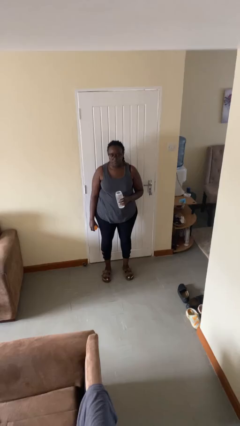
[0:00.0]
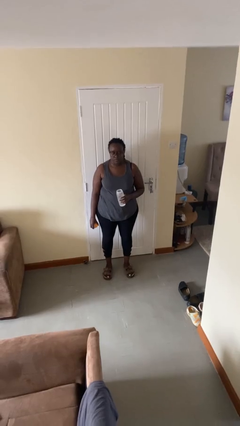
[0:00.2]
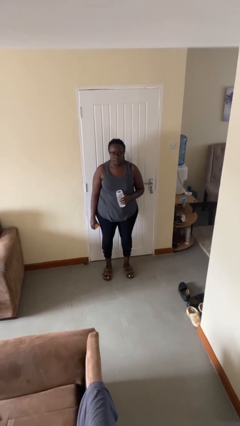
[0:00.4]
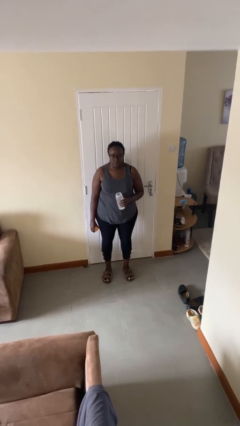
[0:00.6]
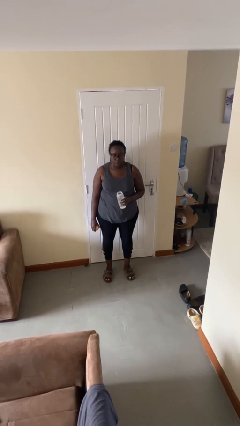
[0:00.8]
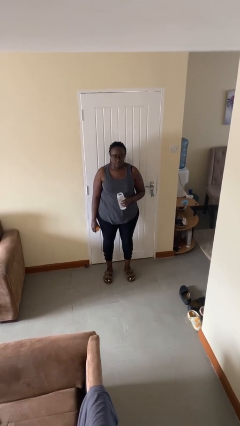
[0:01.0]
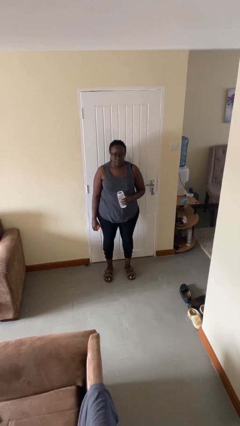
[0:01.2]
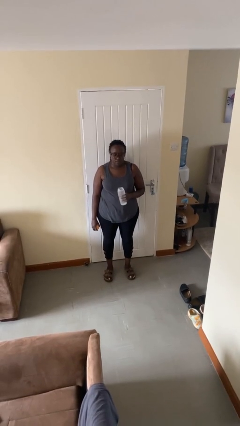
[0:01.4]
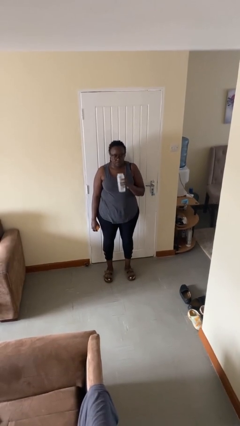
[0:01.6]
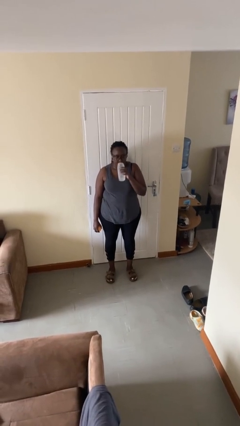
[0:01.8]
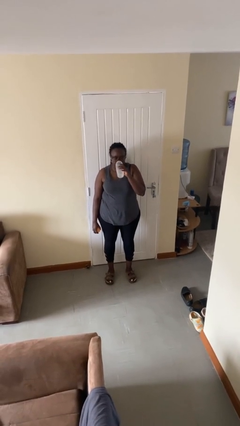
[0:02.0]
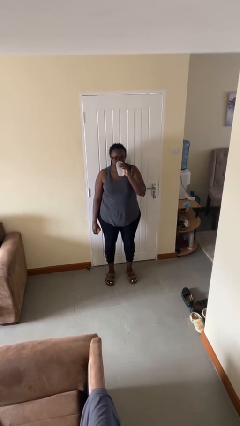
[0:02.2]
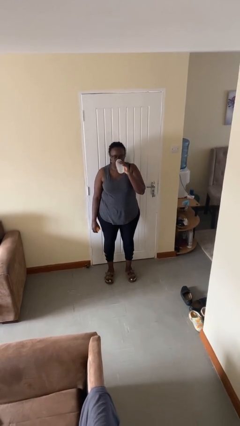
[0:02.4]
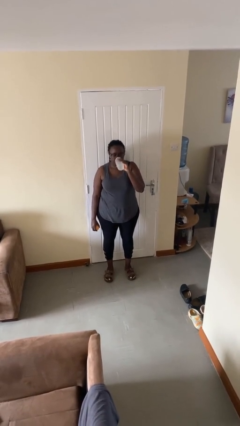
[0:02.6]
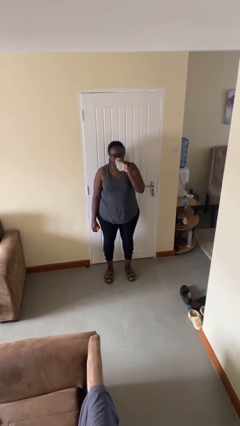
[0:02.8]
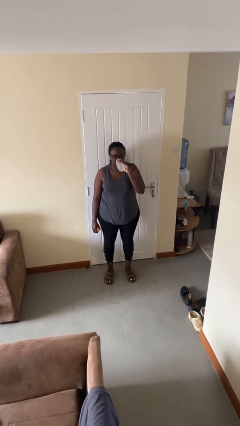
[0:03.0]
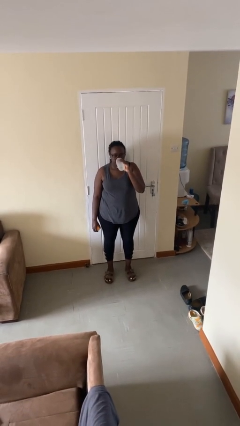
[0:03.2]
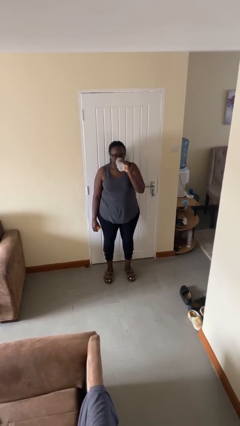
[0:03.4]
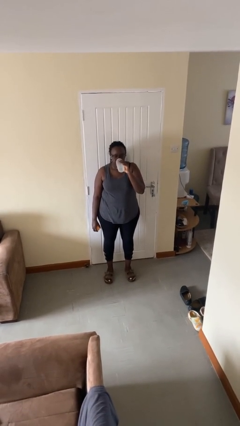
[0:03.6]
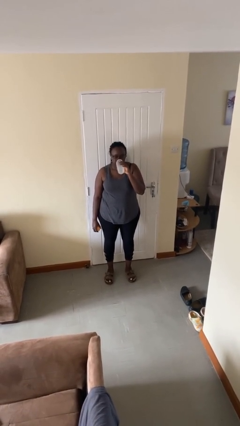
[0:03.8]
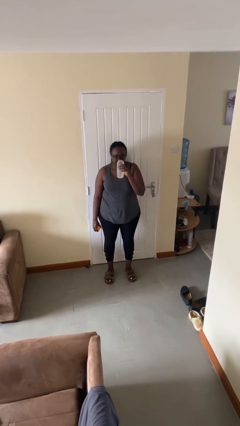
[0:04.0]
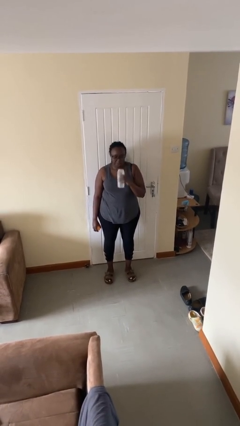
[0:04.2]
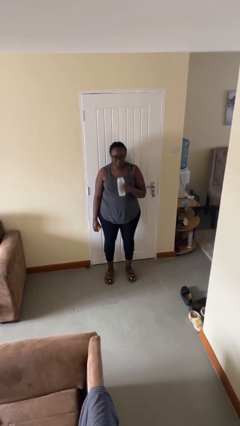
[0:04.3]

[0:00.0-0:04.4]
person drinks from bottle

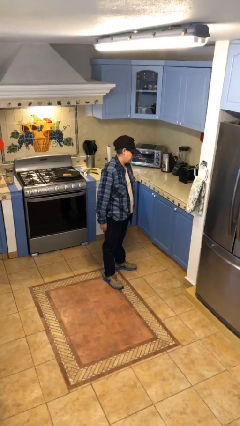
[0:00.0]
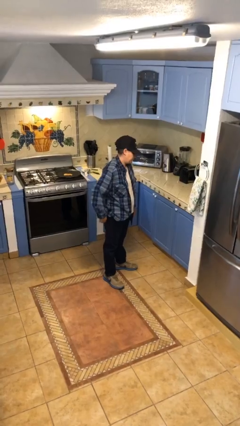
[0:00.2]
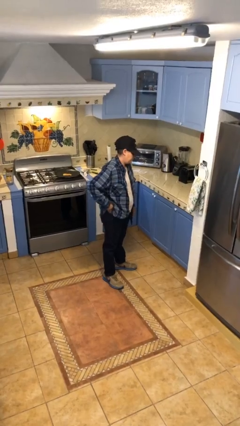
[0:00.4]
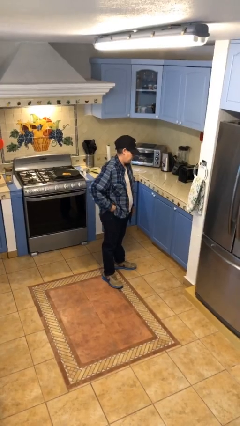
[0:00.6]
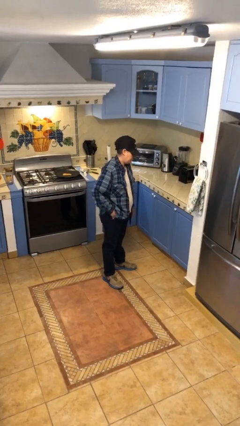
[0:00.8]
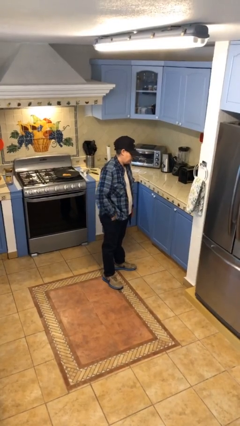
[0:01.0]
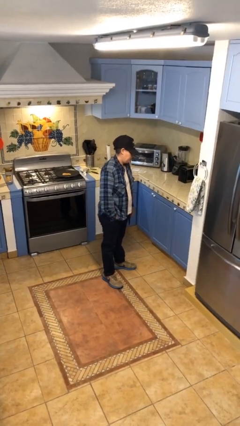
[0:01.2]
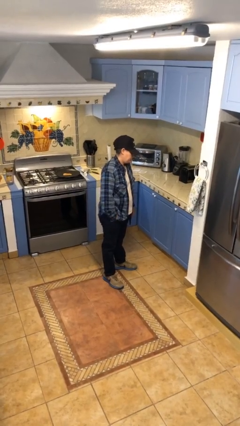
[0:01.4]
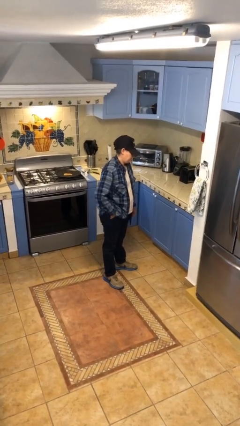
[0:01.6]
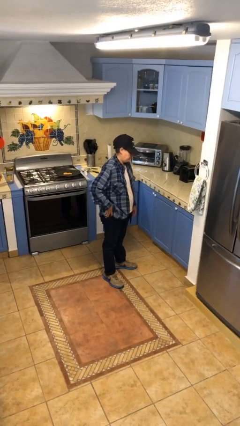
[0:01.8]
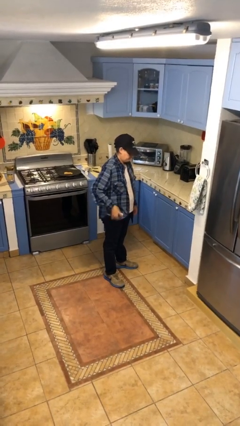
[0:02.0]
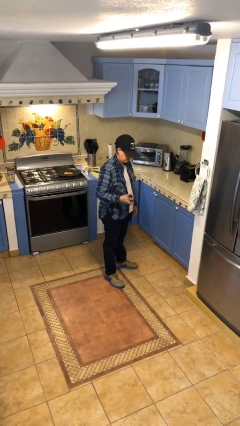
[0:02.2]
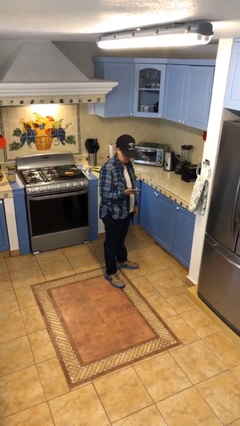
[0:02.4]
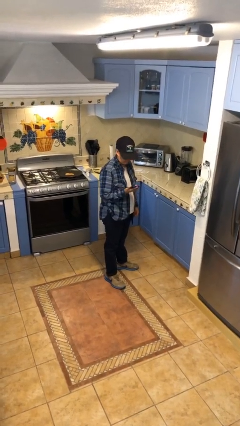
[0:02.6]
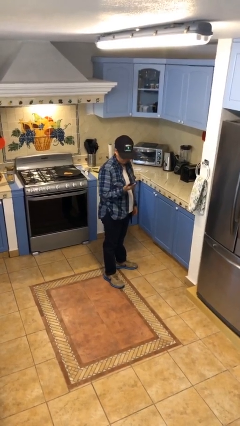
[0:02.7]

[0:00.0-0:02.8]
person takes phone from pocket

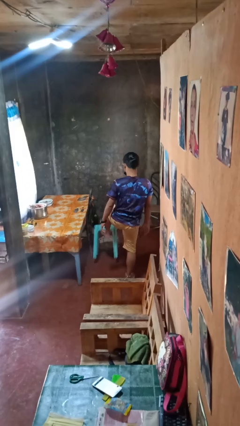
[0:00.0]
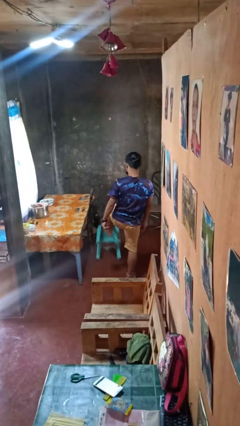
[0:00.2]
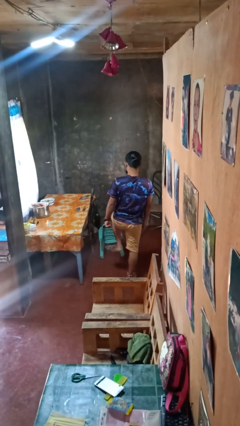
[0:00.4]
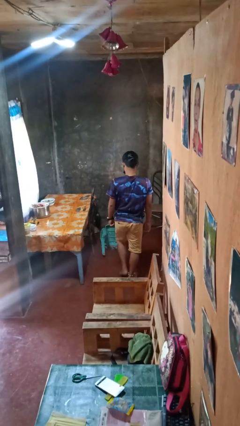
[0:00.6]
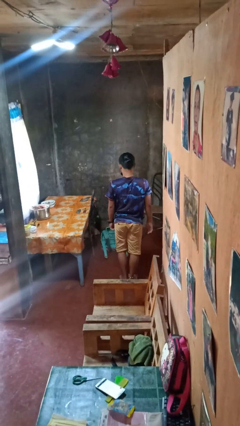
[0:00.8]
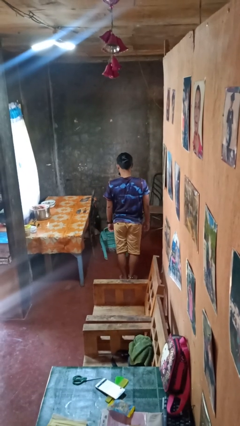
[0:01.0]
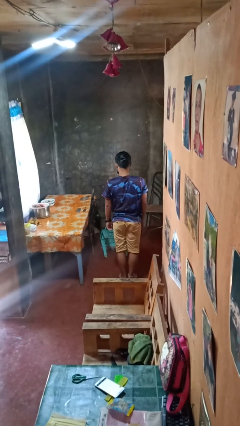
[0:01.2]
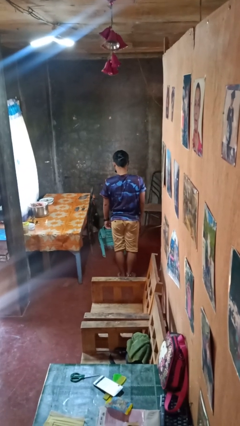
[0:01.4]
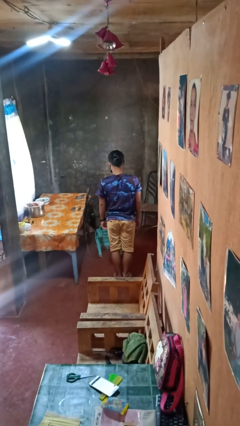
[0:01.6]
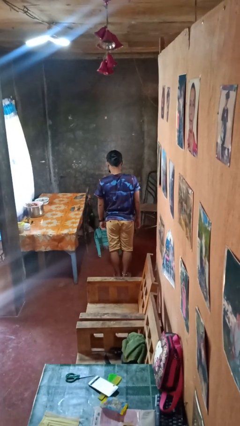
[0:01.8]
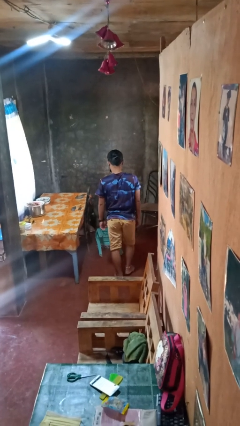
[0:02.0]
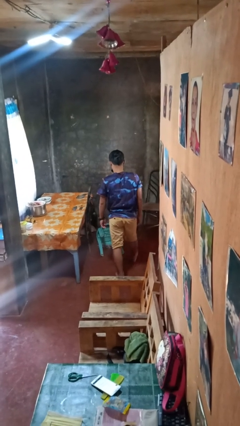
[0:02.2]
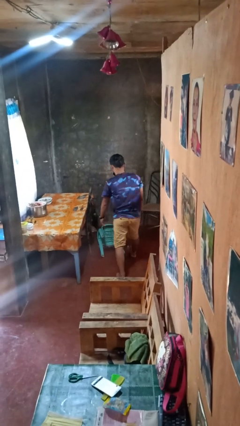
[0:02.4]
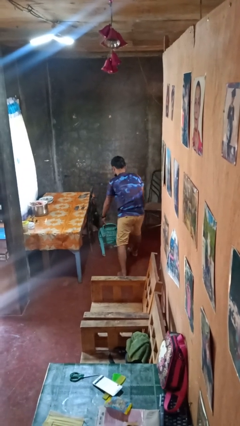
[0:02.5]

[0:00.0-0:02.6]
person knocks over furniture

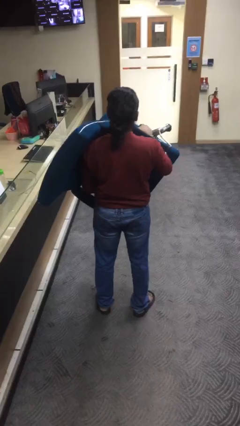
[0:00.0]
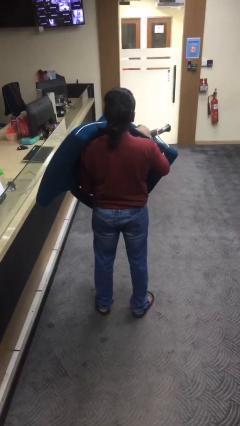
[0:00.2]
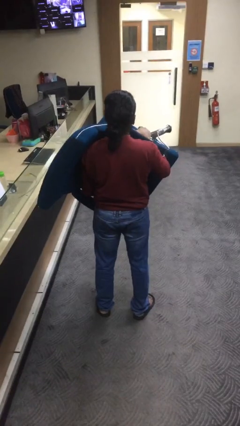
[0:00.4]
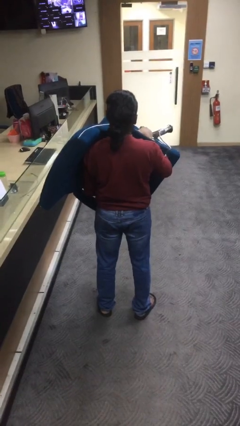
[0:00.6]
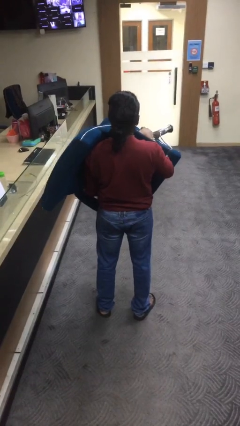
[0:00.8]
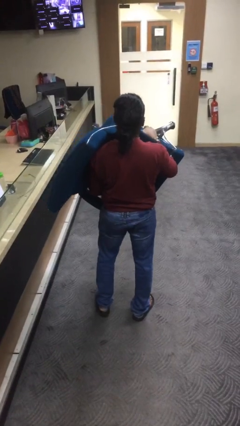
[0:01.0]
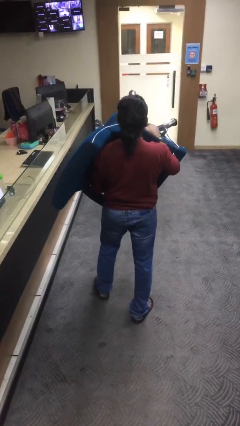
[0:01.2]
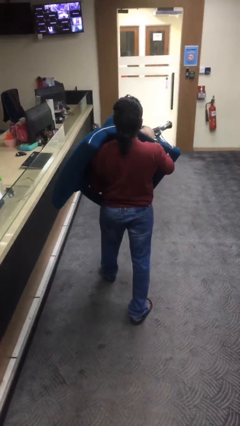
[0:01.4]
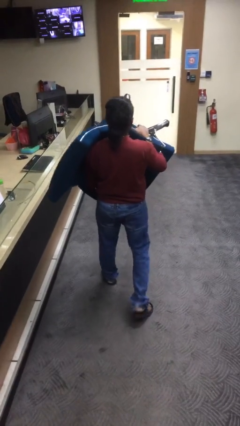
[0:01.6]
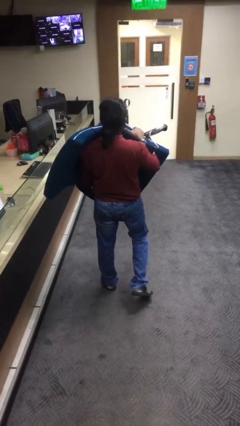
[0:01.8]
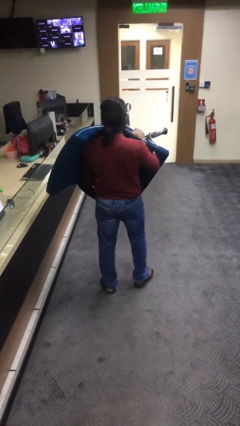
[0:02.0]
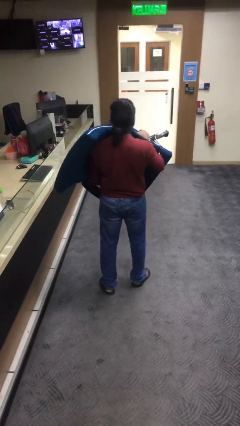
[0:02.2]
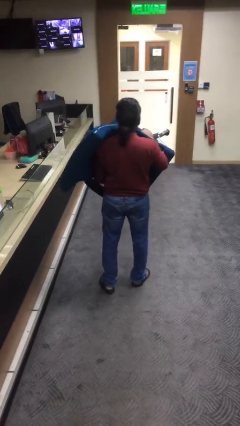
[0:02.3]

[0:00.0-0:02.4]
person carries furniture

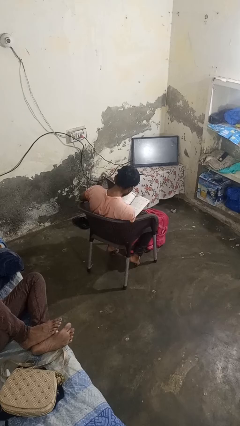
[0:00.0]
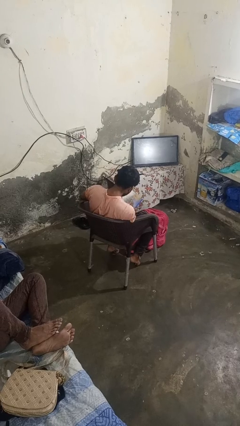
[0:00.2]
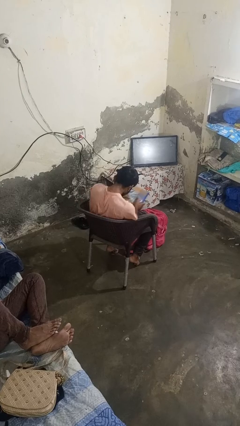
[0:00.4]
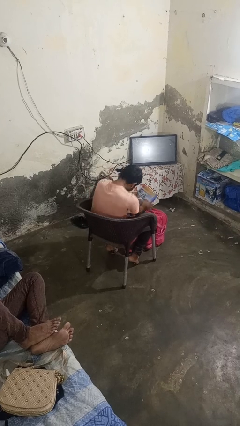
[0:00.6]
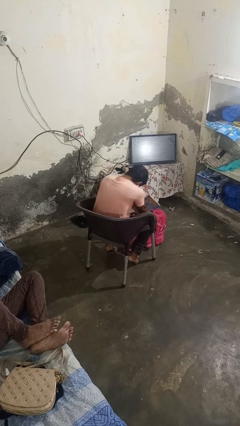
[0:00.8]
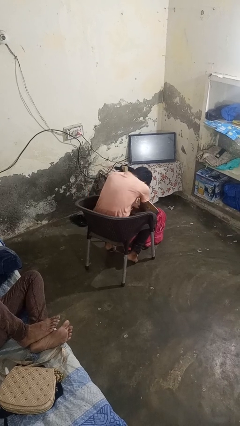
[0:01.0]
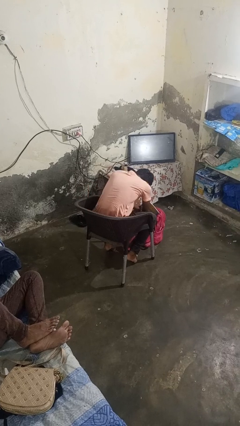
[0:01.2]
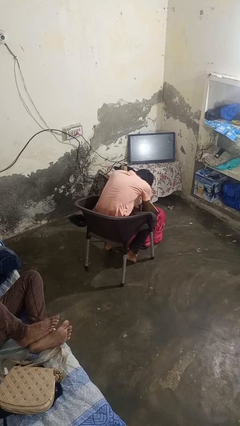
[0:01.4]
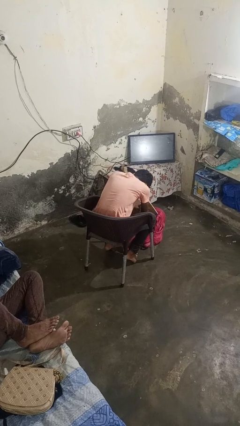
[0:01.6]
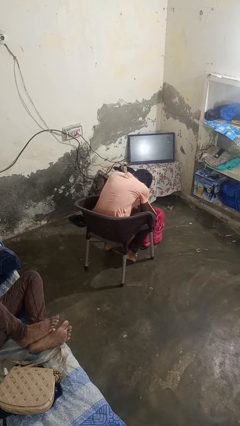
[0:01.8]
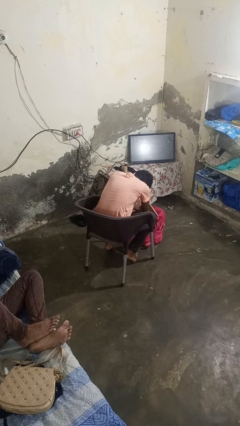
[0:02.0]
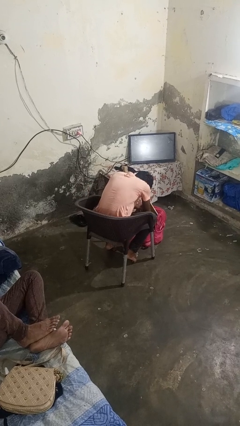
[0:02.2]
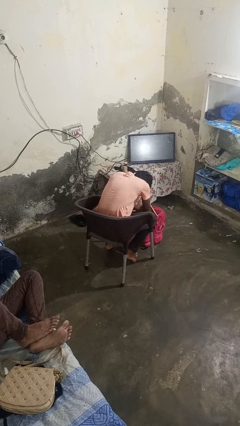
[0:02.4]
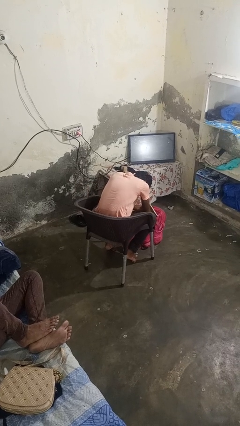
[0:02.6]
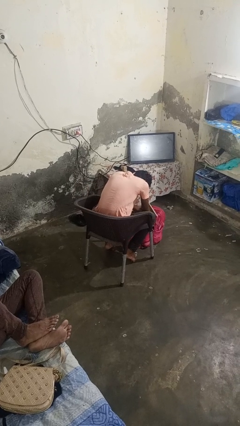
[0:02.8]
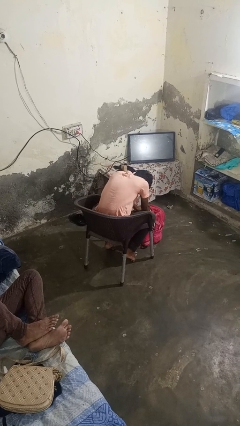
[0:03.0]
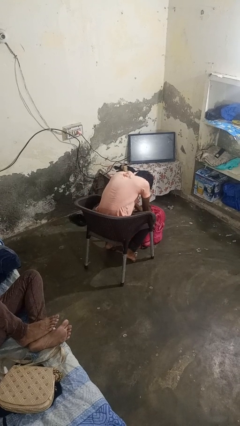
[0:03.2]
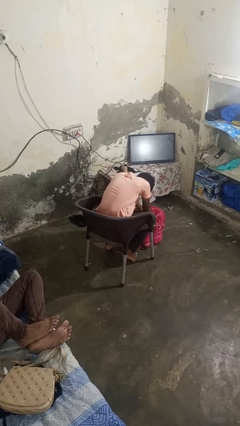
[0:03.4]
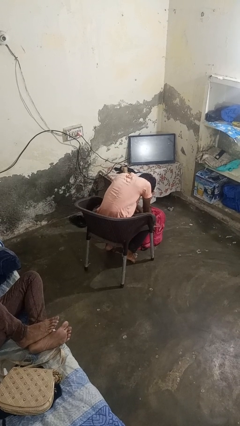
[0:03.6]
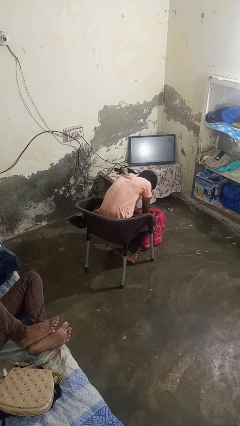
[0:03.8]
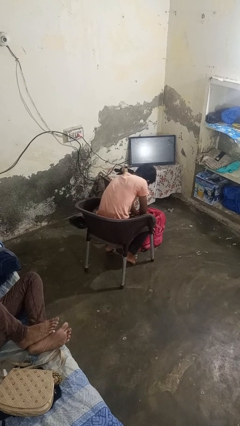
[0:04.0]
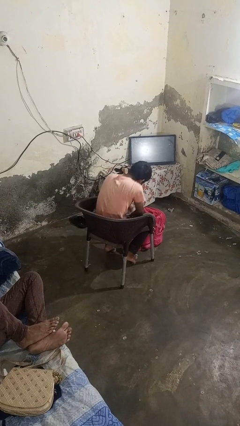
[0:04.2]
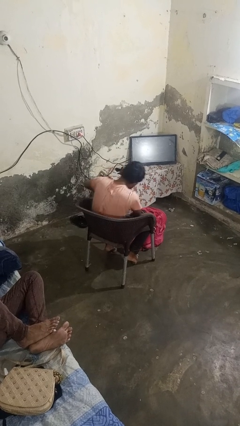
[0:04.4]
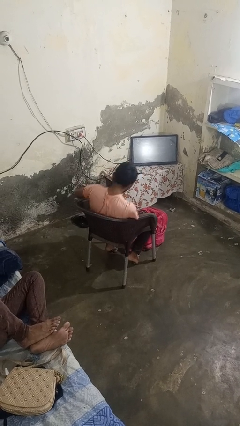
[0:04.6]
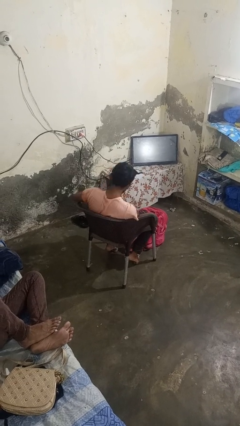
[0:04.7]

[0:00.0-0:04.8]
person puts object into backpack

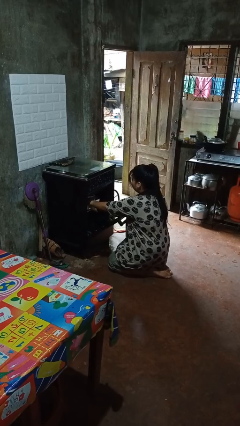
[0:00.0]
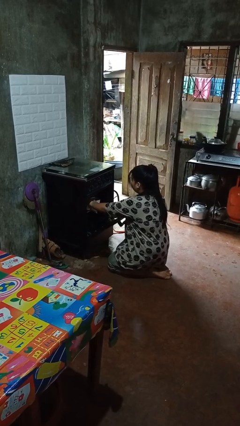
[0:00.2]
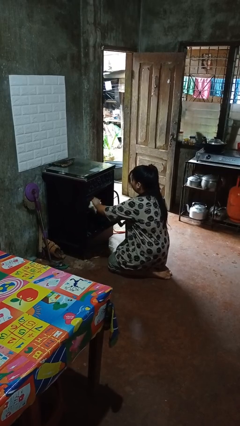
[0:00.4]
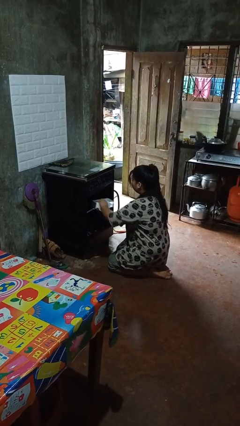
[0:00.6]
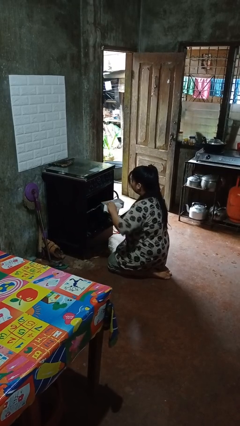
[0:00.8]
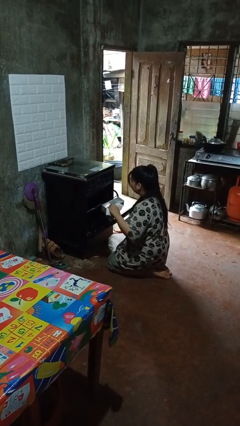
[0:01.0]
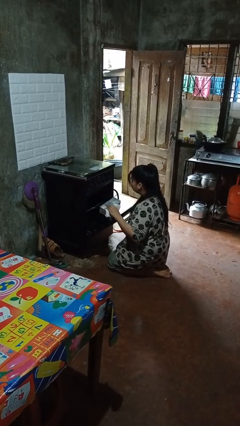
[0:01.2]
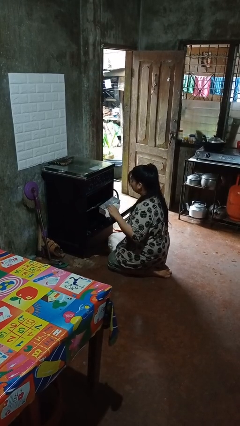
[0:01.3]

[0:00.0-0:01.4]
person takes object from oven
